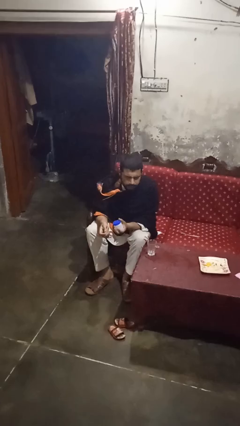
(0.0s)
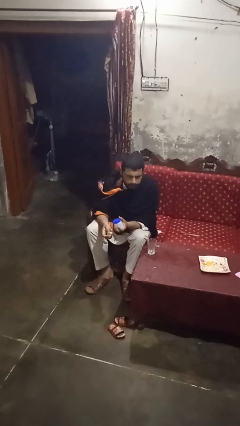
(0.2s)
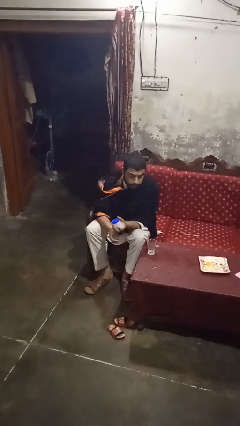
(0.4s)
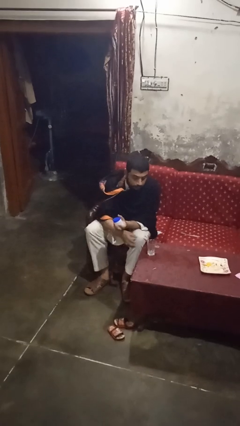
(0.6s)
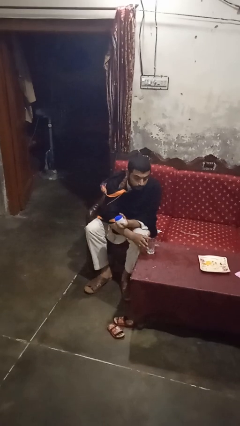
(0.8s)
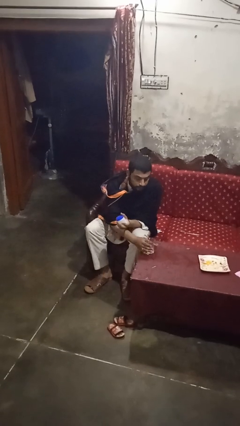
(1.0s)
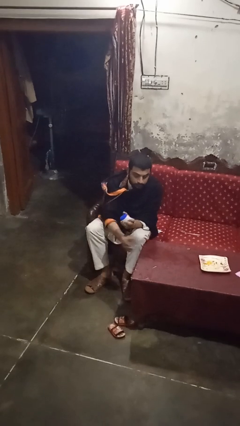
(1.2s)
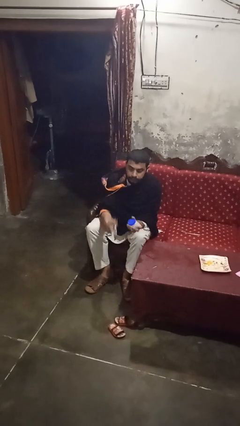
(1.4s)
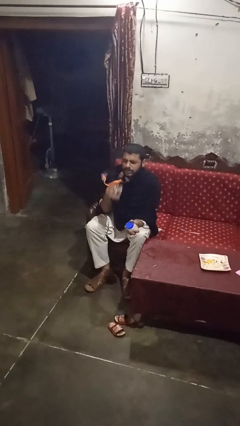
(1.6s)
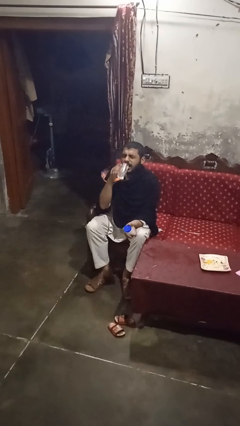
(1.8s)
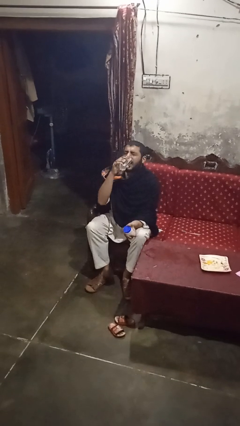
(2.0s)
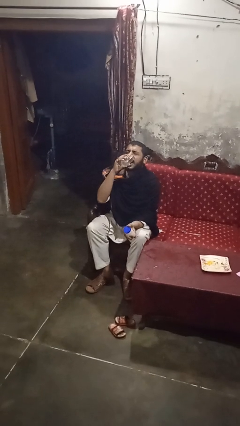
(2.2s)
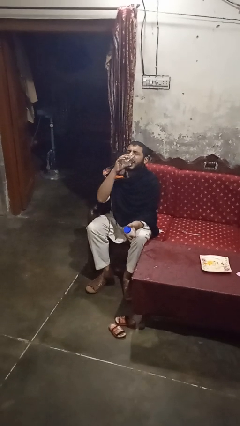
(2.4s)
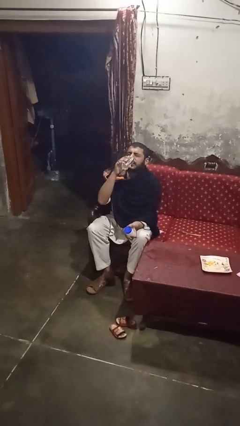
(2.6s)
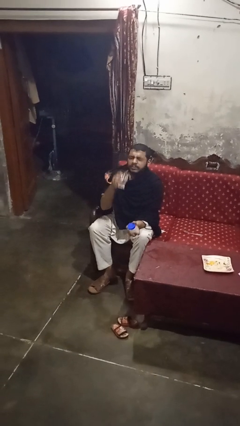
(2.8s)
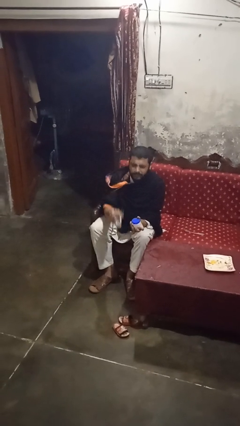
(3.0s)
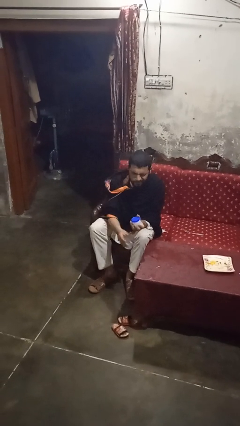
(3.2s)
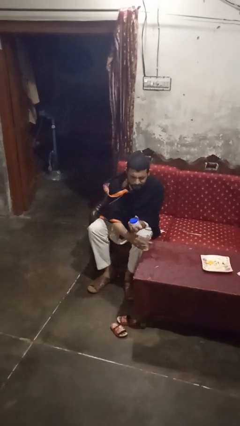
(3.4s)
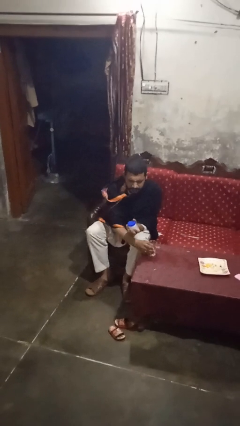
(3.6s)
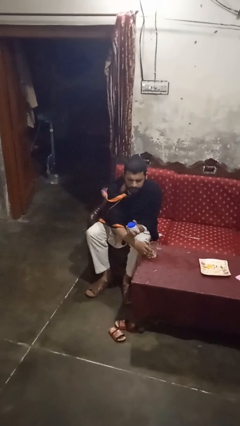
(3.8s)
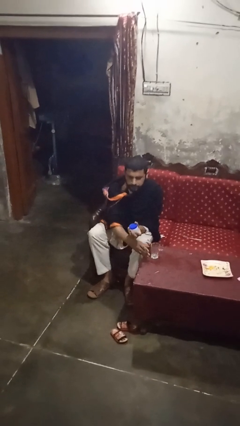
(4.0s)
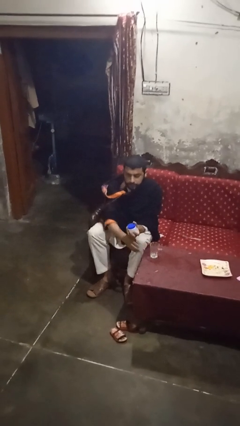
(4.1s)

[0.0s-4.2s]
person drinks from cup

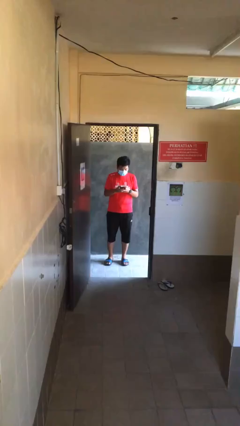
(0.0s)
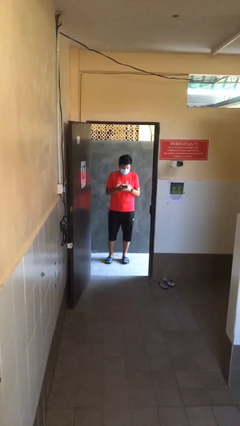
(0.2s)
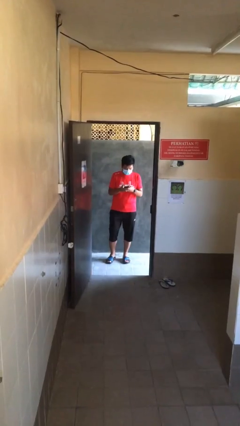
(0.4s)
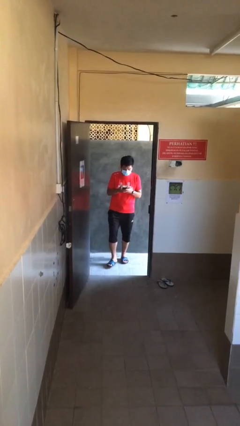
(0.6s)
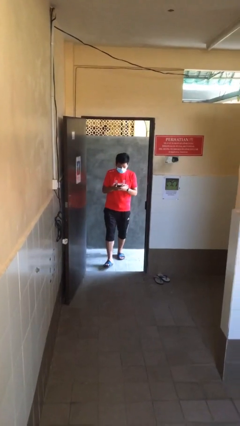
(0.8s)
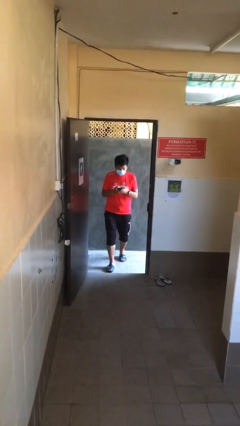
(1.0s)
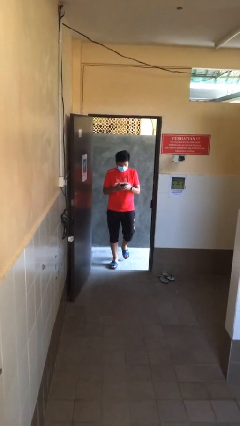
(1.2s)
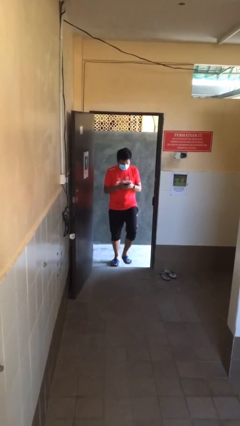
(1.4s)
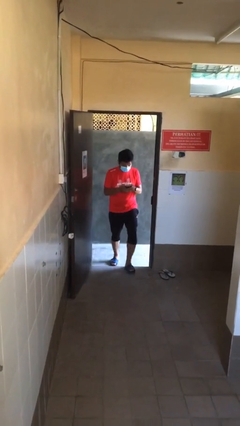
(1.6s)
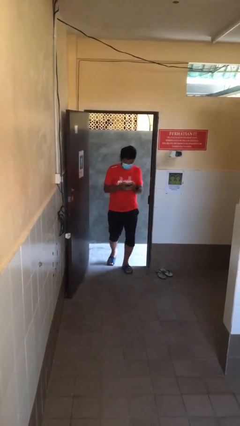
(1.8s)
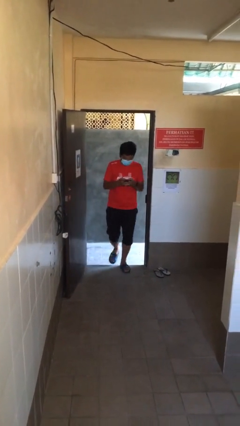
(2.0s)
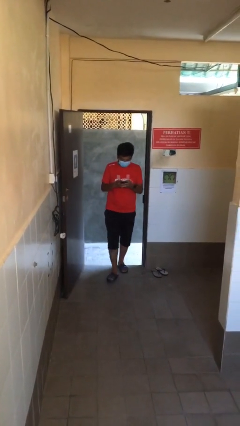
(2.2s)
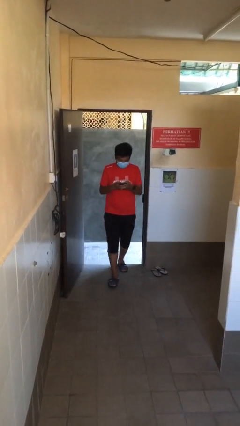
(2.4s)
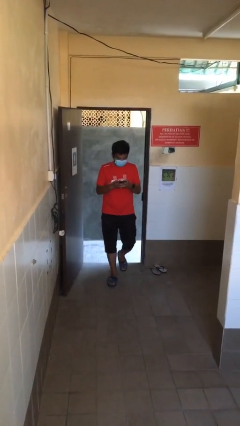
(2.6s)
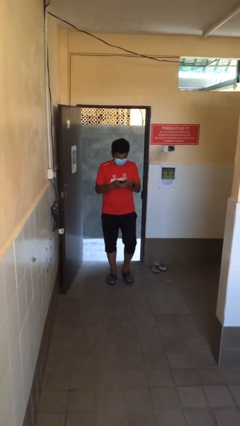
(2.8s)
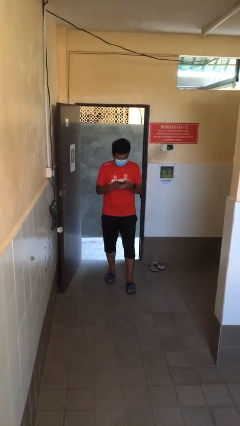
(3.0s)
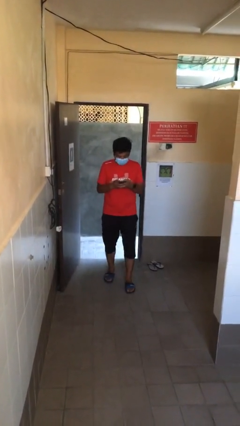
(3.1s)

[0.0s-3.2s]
person enters scene through structure

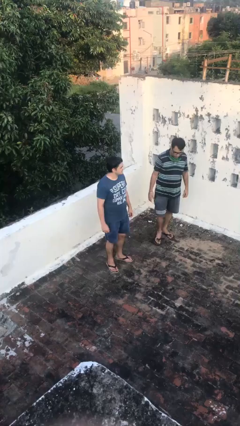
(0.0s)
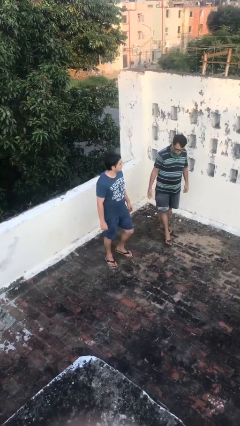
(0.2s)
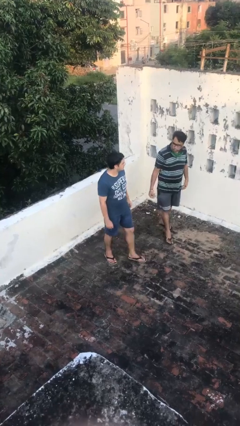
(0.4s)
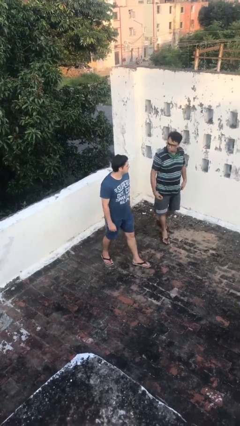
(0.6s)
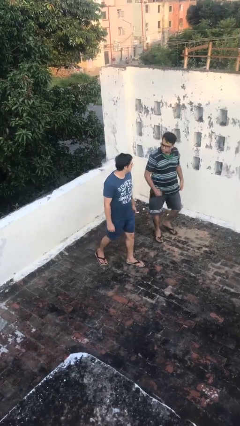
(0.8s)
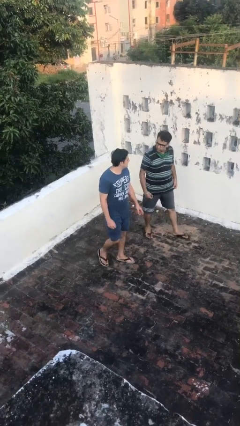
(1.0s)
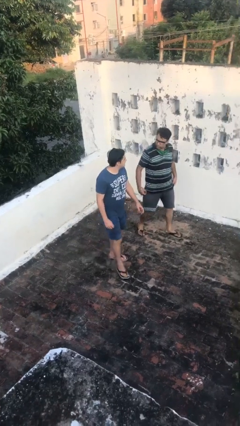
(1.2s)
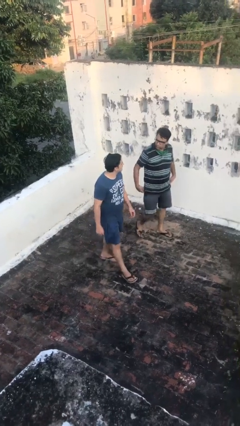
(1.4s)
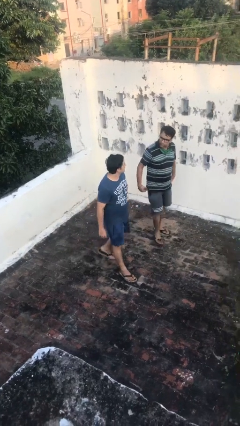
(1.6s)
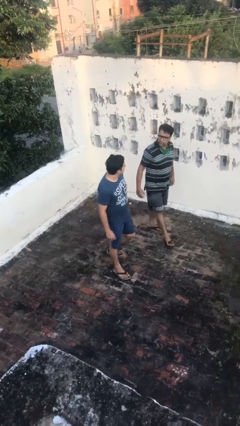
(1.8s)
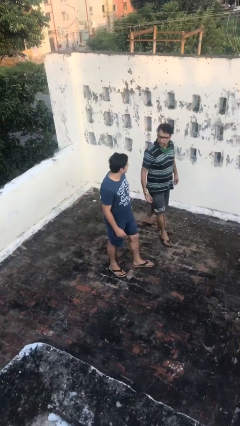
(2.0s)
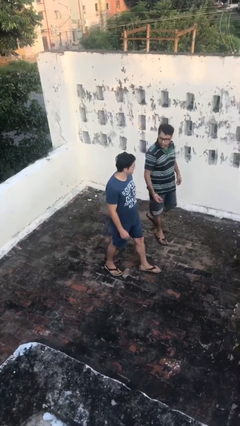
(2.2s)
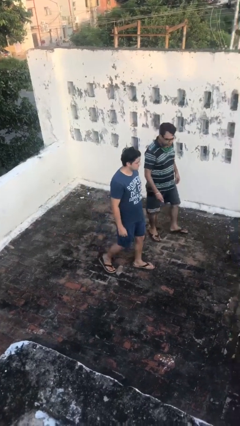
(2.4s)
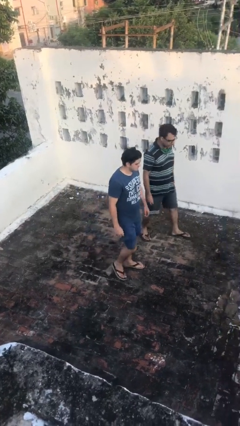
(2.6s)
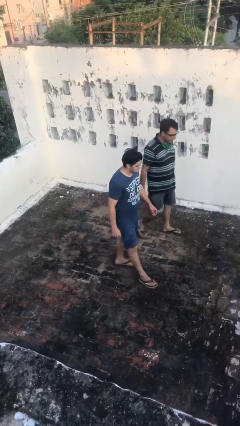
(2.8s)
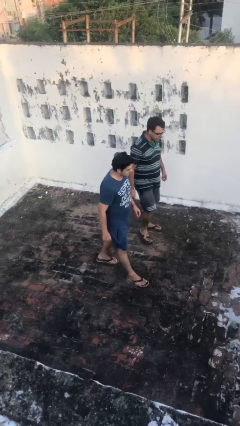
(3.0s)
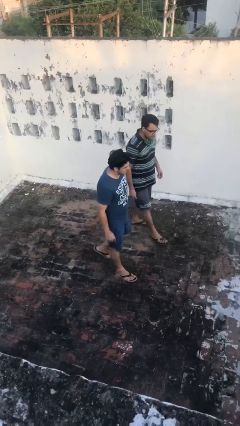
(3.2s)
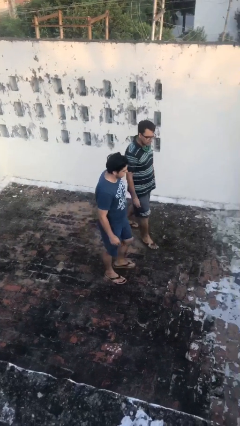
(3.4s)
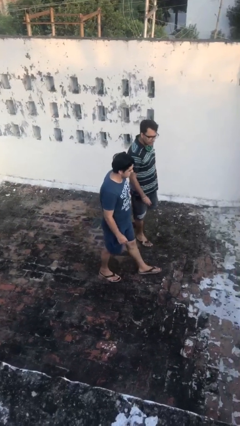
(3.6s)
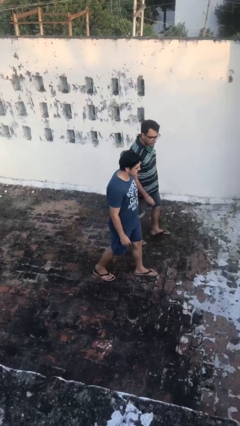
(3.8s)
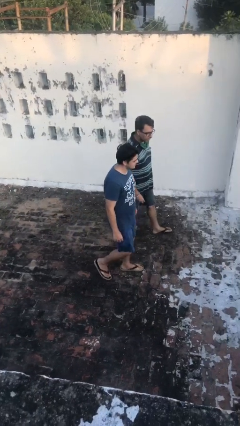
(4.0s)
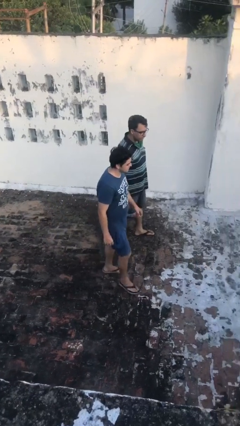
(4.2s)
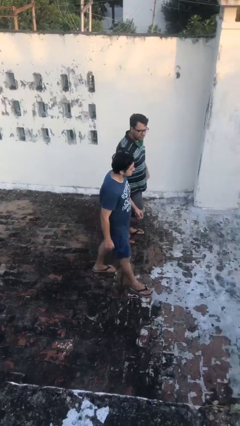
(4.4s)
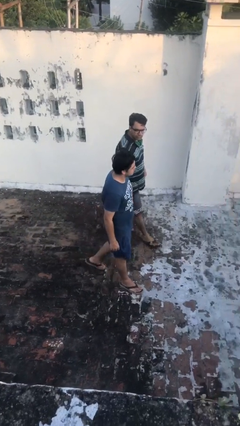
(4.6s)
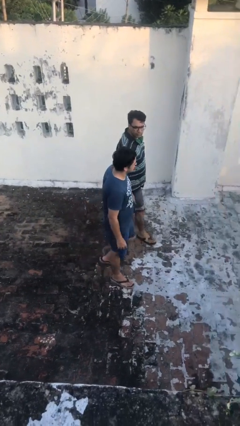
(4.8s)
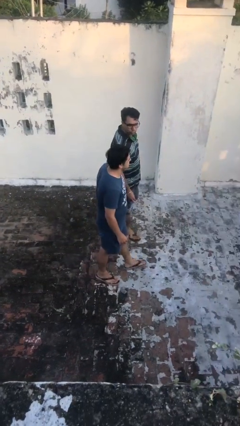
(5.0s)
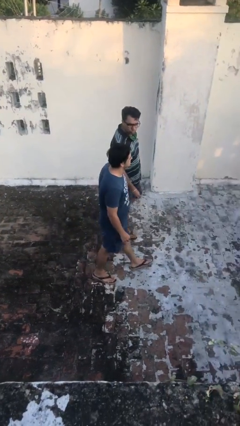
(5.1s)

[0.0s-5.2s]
person talks to person

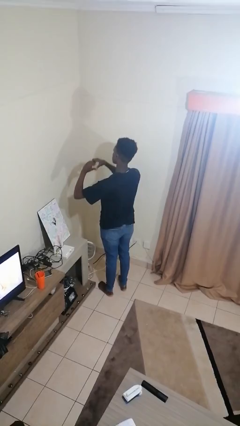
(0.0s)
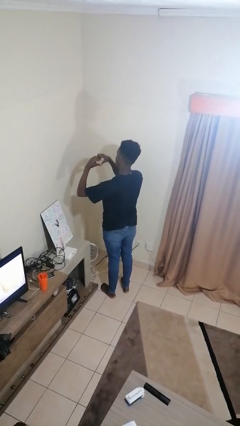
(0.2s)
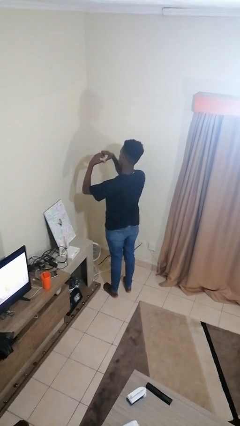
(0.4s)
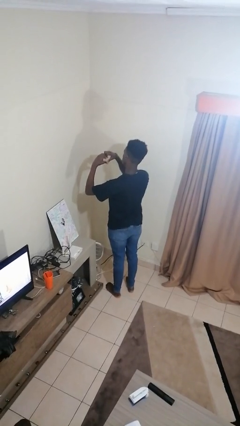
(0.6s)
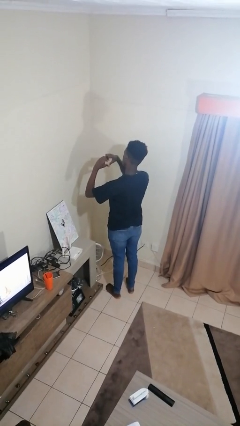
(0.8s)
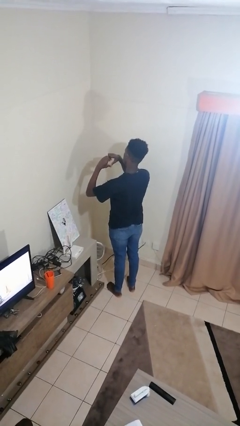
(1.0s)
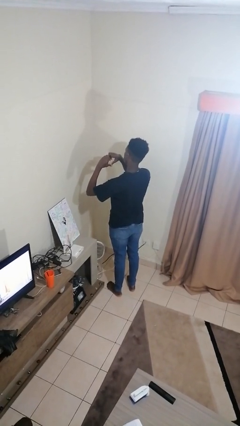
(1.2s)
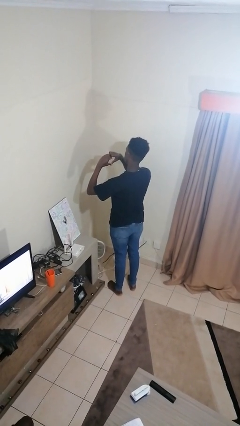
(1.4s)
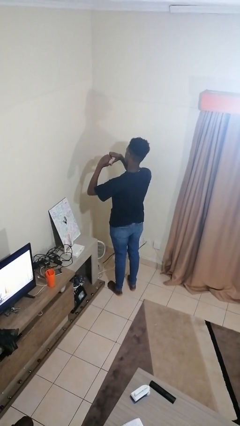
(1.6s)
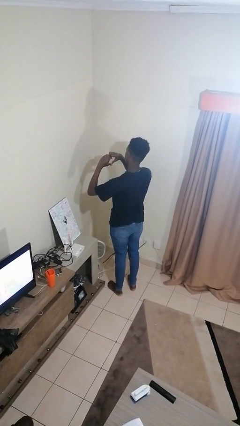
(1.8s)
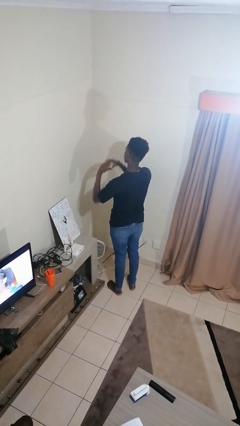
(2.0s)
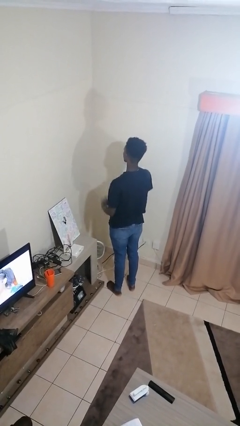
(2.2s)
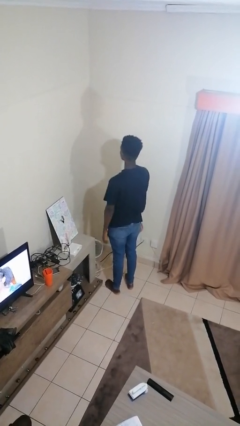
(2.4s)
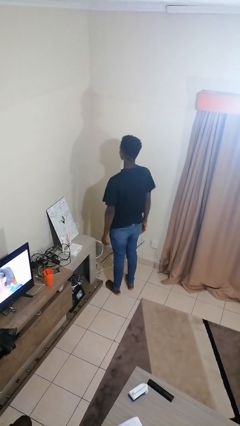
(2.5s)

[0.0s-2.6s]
person gestures heart

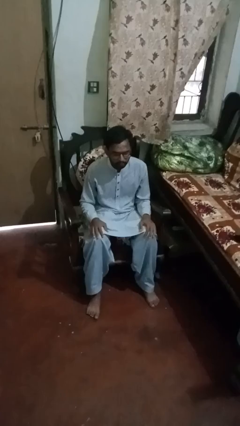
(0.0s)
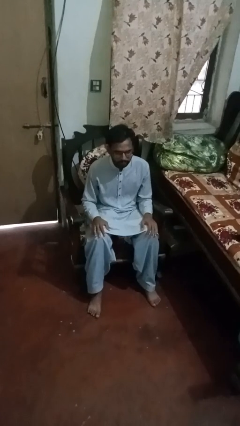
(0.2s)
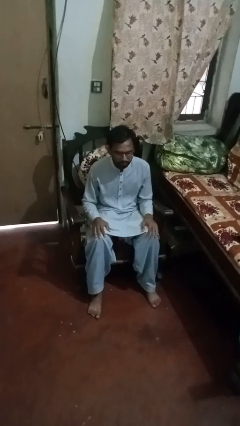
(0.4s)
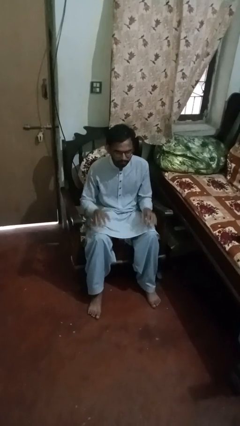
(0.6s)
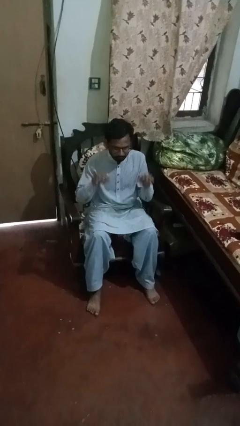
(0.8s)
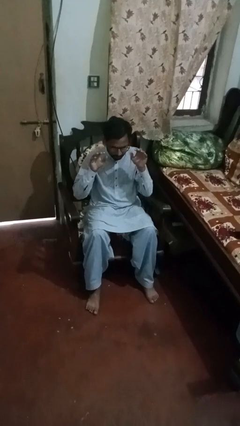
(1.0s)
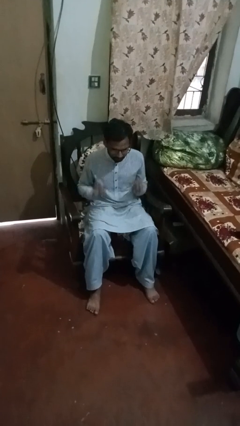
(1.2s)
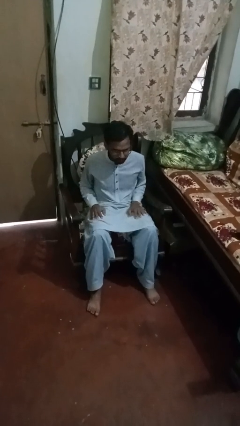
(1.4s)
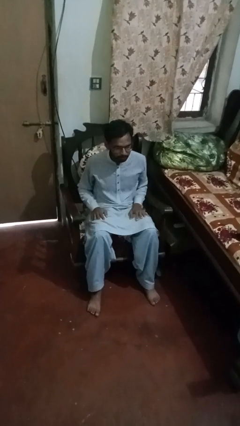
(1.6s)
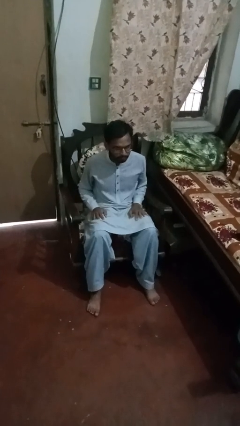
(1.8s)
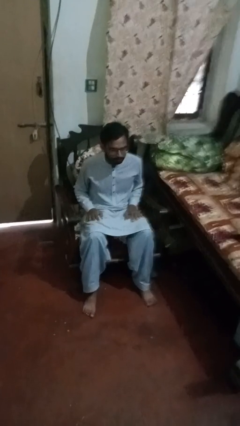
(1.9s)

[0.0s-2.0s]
person slaps hands on thighs
